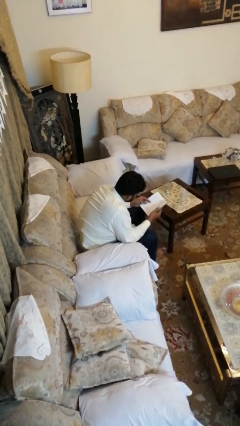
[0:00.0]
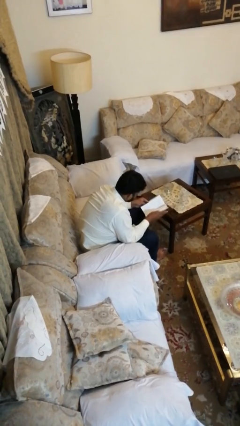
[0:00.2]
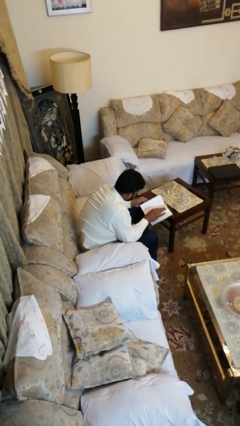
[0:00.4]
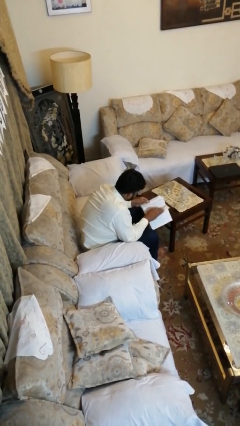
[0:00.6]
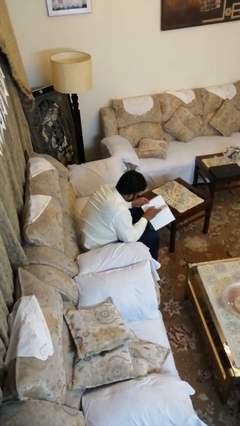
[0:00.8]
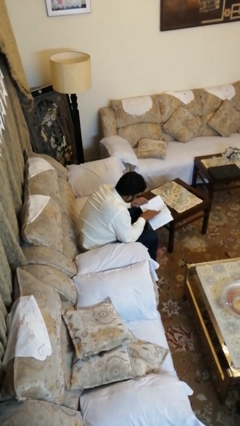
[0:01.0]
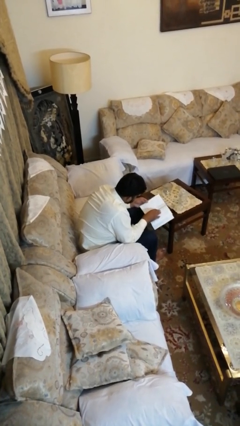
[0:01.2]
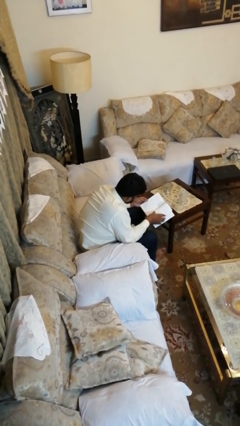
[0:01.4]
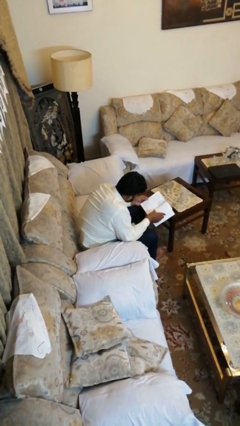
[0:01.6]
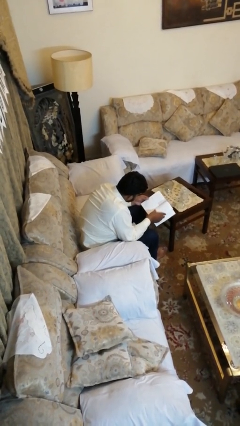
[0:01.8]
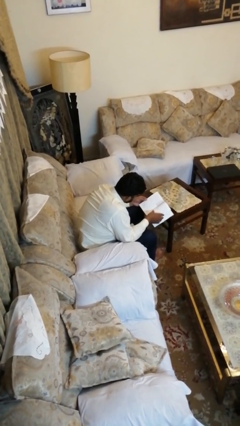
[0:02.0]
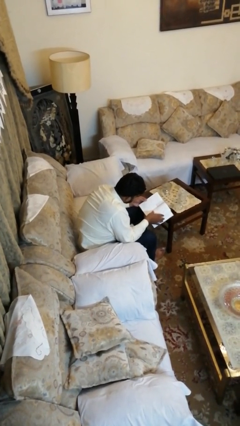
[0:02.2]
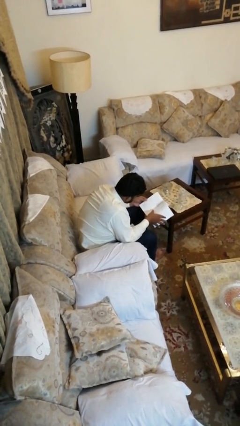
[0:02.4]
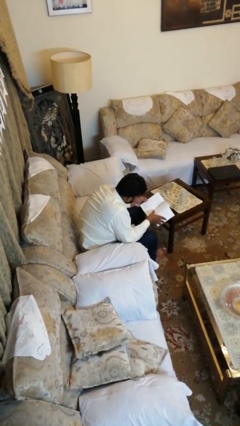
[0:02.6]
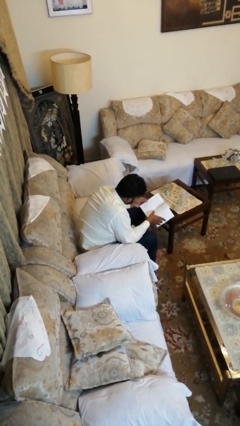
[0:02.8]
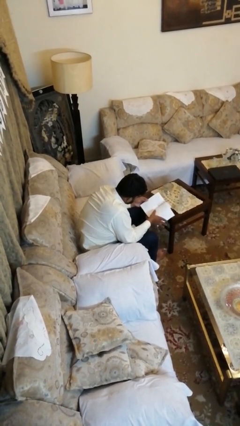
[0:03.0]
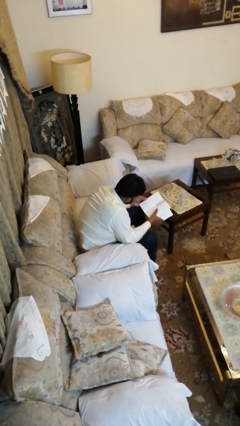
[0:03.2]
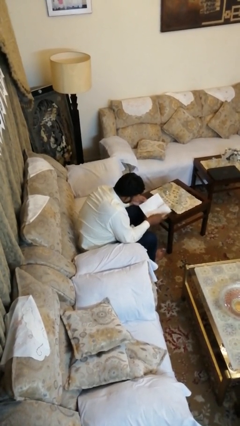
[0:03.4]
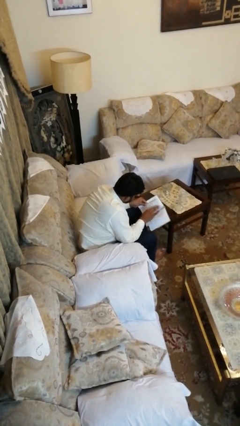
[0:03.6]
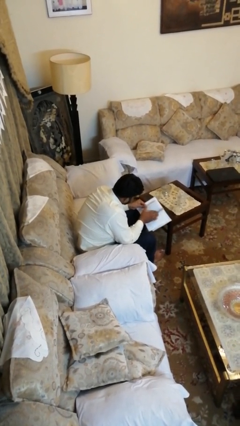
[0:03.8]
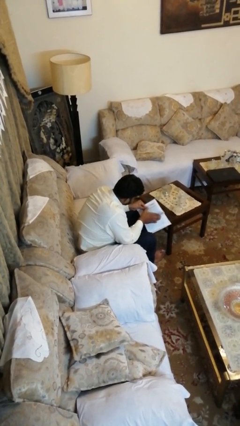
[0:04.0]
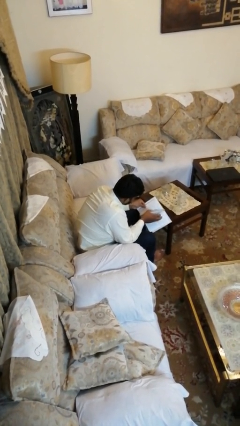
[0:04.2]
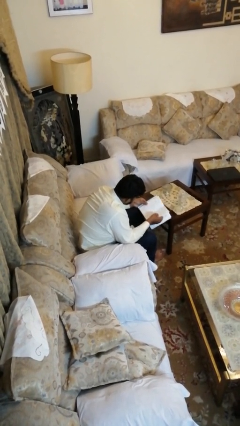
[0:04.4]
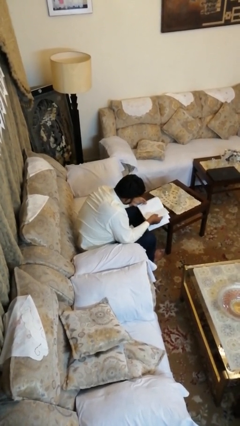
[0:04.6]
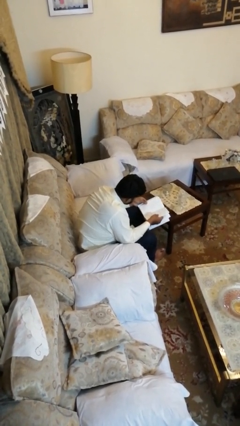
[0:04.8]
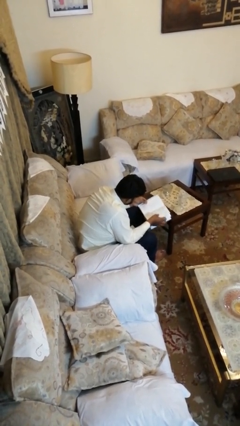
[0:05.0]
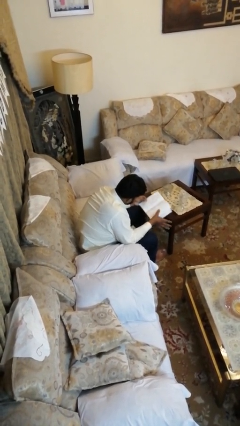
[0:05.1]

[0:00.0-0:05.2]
person reads book

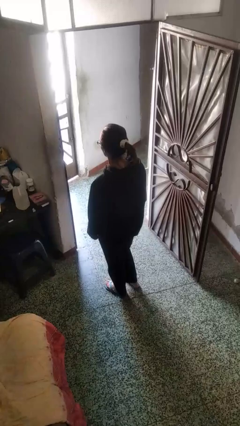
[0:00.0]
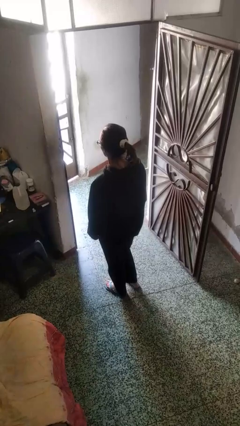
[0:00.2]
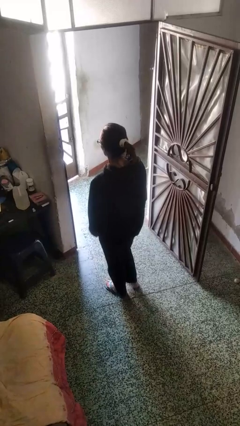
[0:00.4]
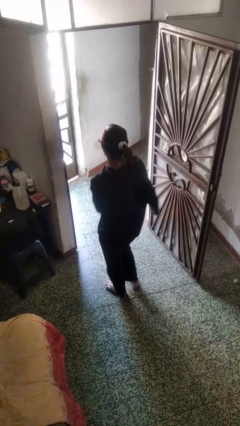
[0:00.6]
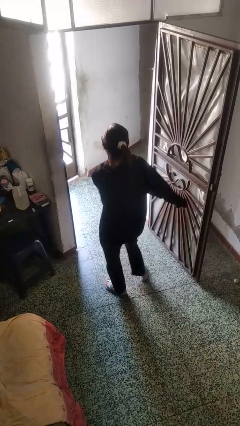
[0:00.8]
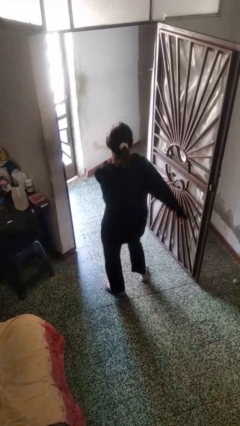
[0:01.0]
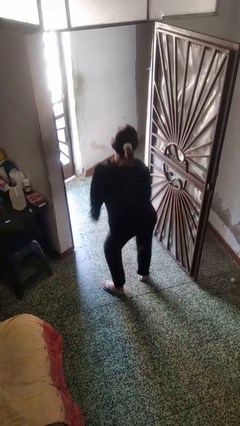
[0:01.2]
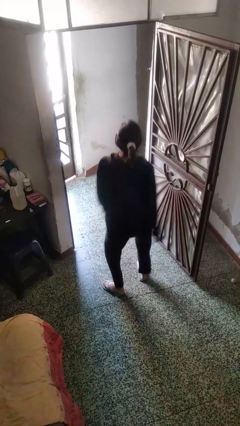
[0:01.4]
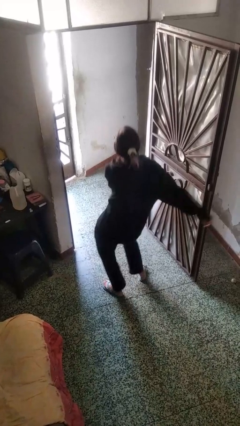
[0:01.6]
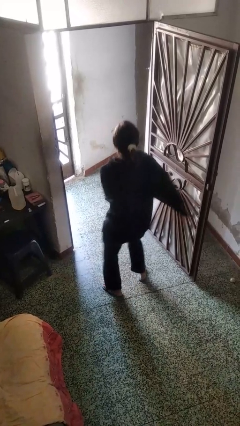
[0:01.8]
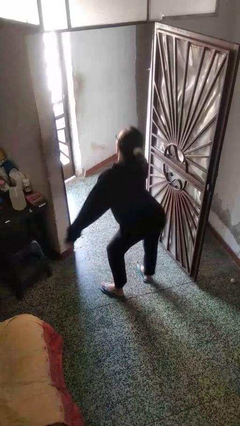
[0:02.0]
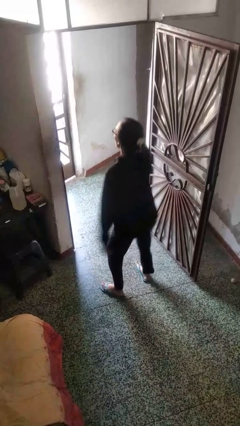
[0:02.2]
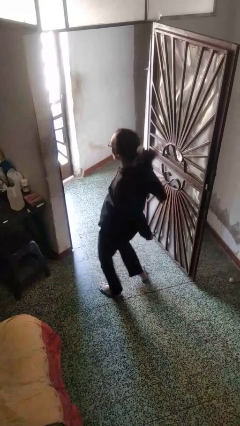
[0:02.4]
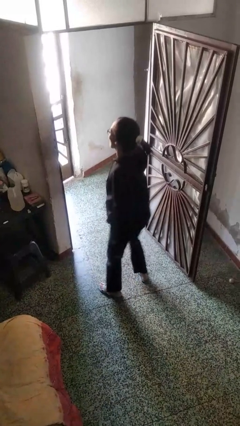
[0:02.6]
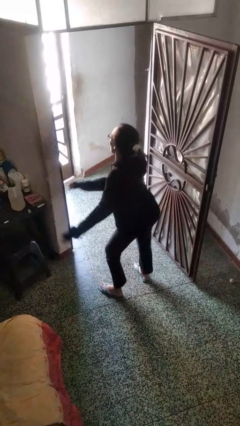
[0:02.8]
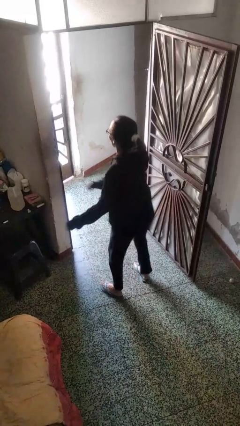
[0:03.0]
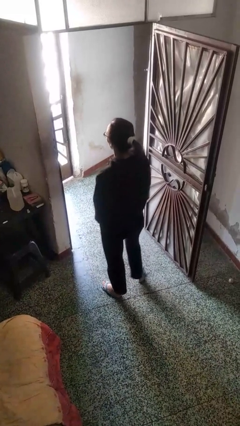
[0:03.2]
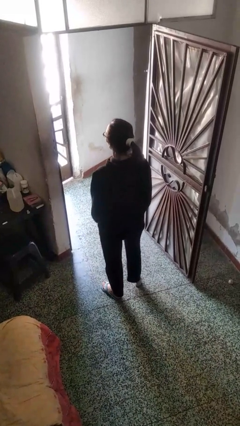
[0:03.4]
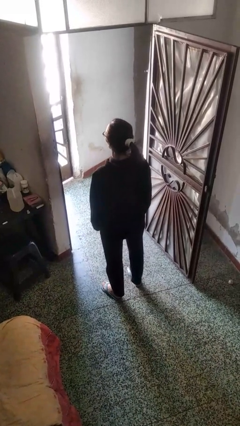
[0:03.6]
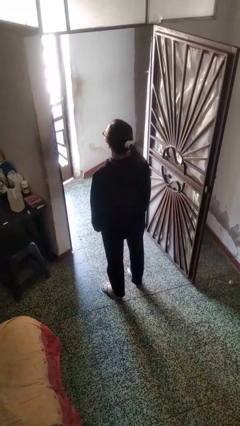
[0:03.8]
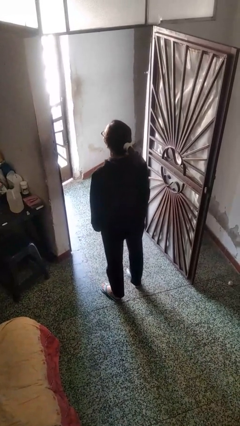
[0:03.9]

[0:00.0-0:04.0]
person dances in place

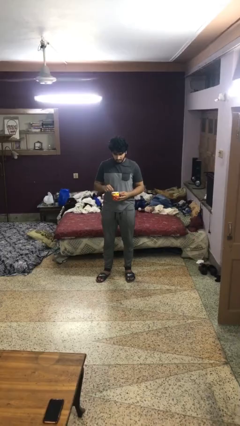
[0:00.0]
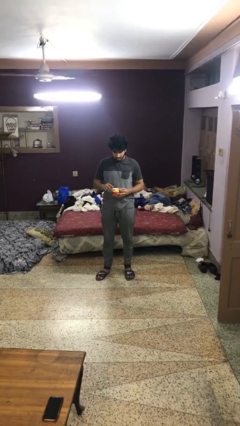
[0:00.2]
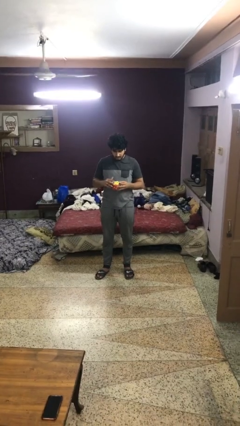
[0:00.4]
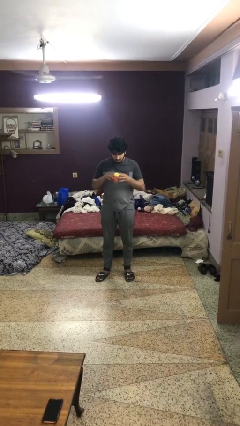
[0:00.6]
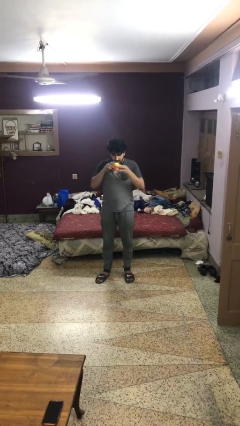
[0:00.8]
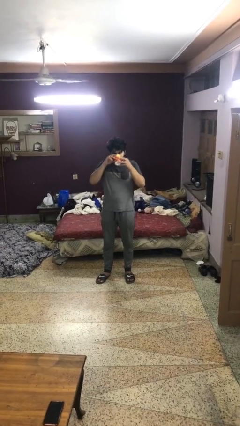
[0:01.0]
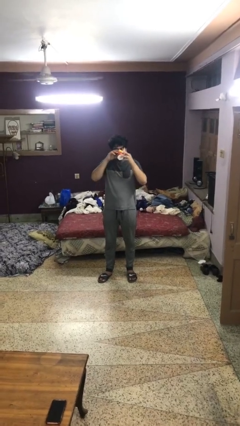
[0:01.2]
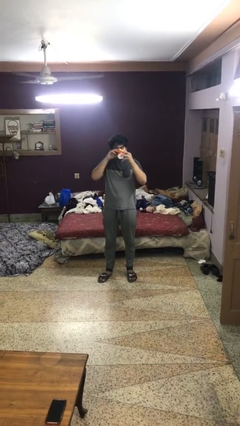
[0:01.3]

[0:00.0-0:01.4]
person drinks from mug

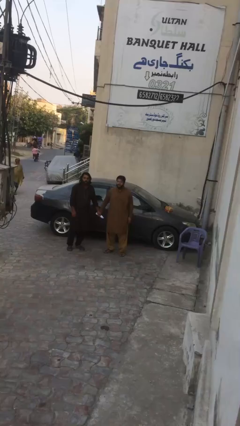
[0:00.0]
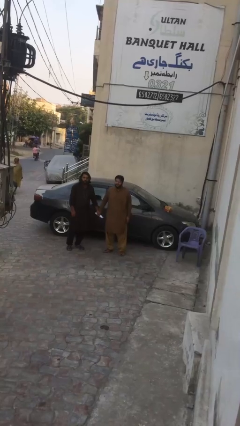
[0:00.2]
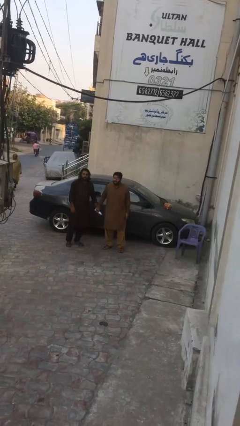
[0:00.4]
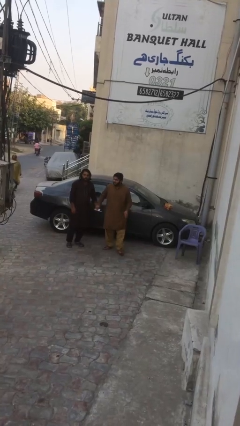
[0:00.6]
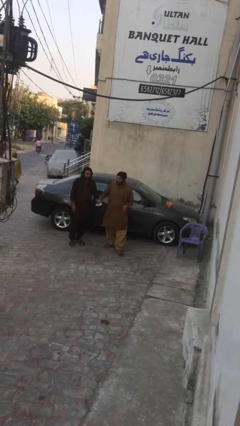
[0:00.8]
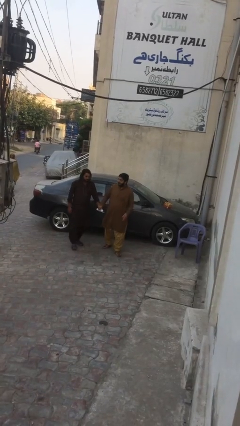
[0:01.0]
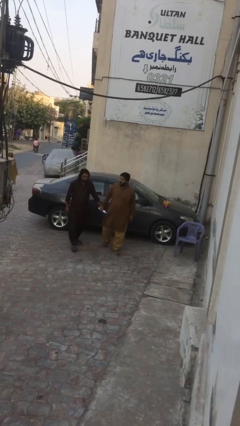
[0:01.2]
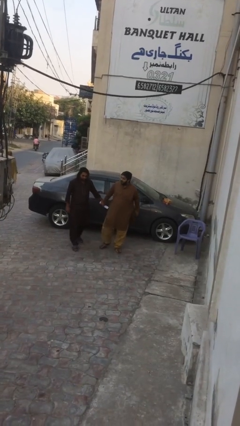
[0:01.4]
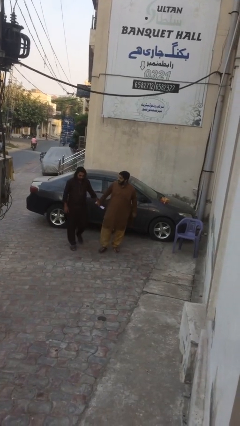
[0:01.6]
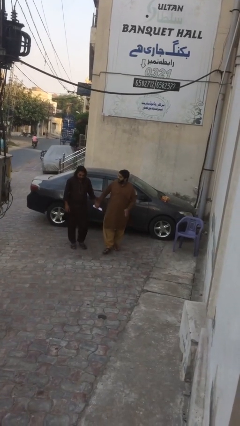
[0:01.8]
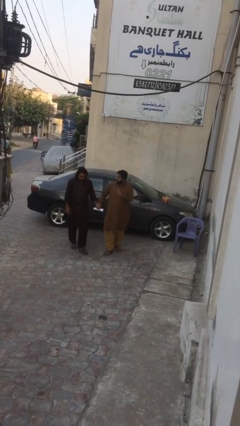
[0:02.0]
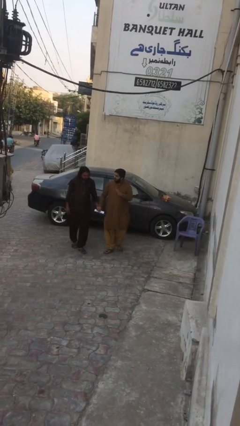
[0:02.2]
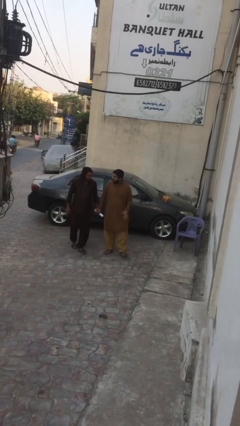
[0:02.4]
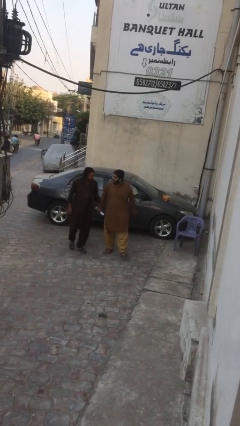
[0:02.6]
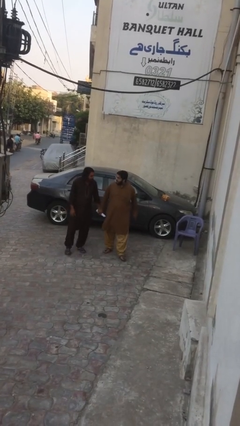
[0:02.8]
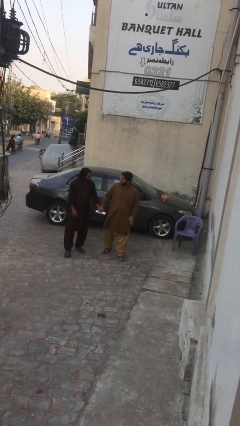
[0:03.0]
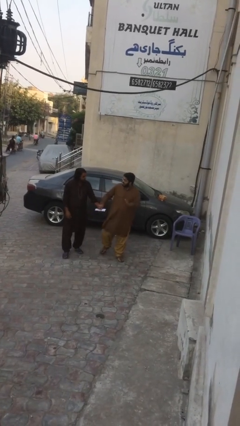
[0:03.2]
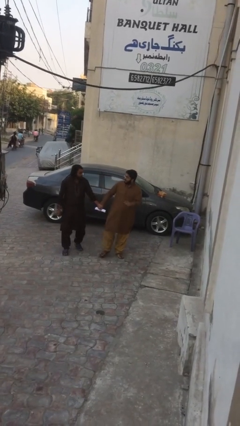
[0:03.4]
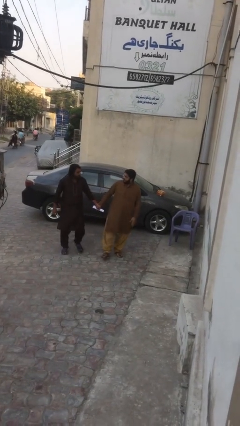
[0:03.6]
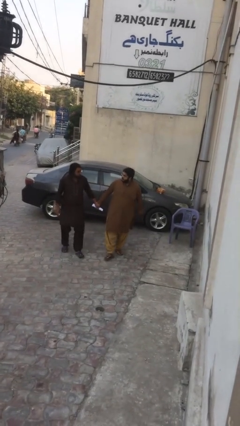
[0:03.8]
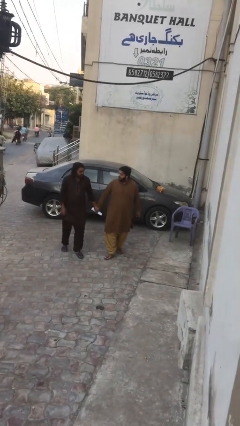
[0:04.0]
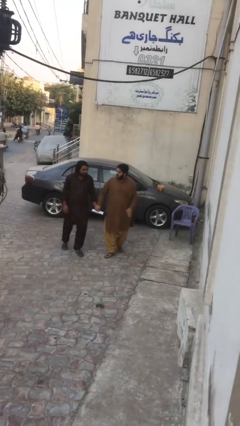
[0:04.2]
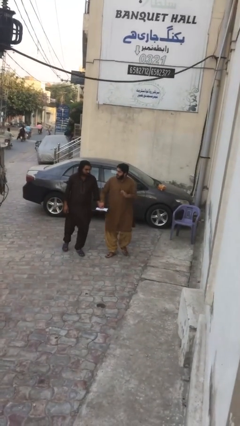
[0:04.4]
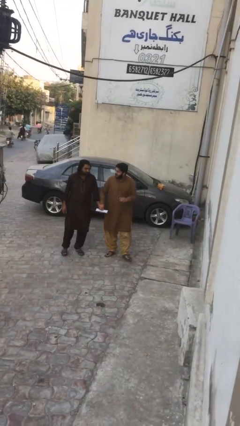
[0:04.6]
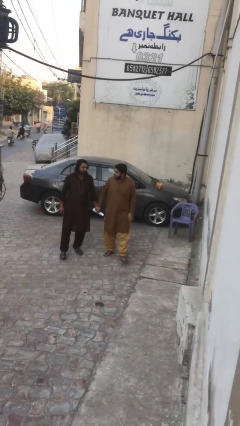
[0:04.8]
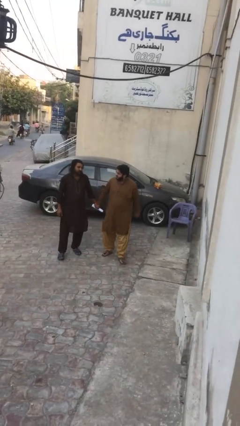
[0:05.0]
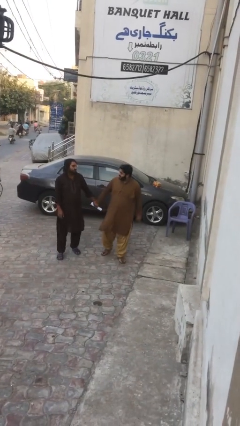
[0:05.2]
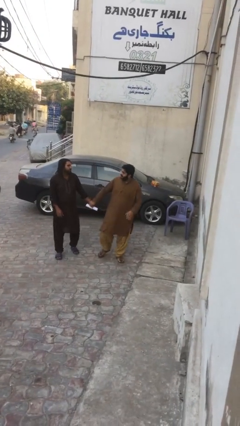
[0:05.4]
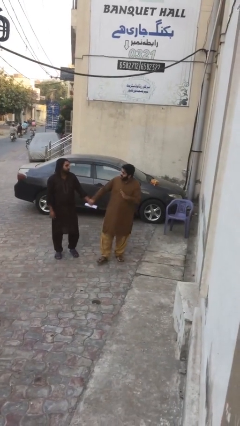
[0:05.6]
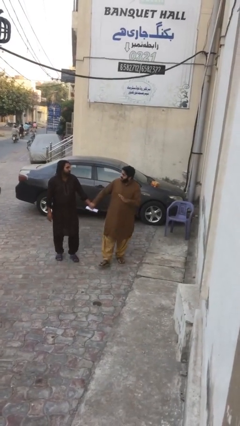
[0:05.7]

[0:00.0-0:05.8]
person holds hand

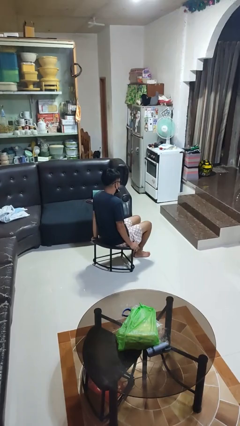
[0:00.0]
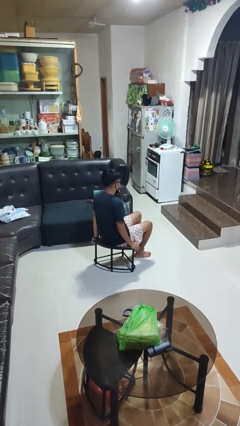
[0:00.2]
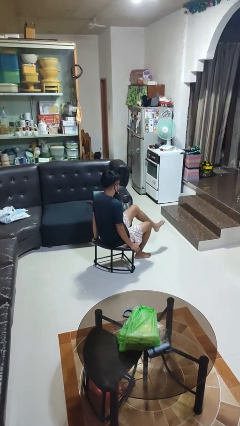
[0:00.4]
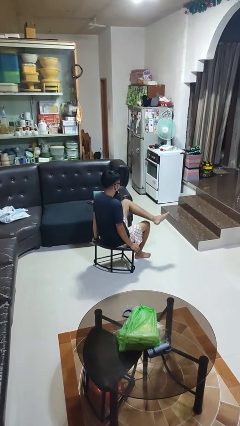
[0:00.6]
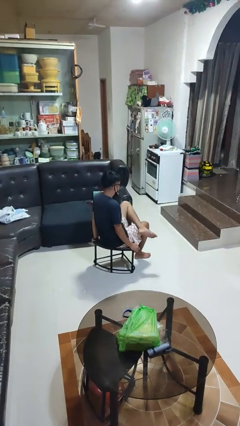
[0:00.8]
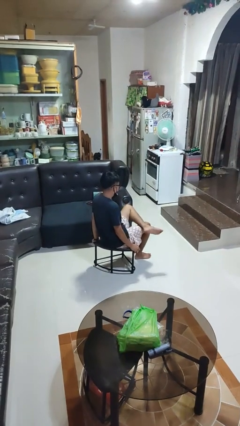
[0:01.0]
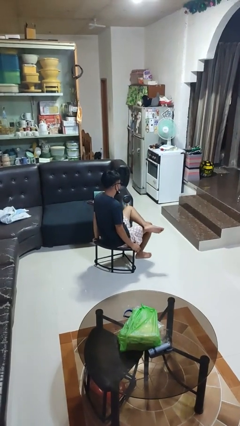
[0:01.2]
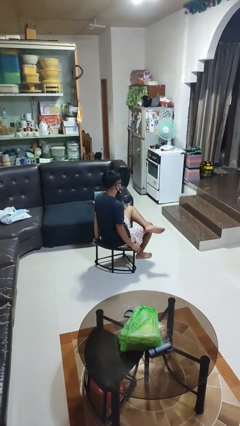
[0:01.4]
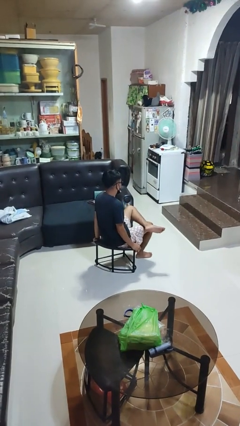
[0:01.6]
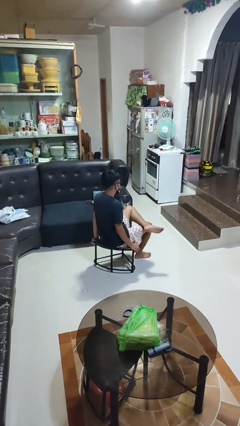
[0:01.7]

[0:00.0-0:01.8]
person crosses legs
